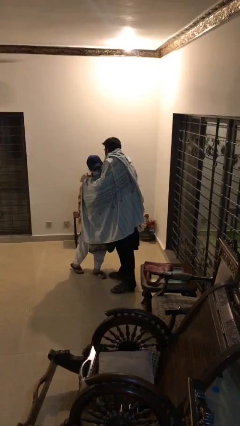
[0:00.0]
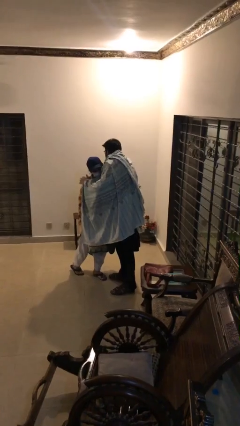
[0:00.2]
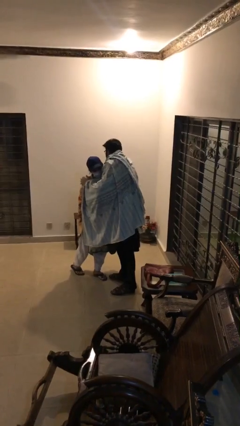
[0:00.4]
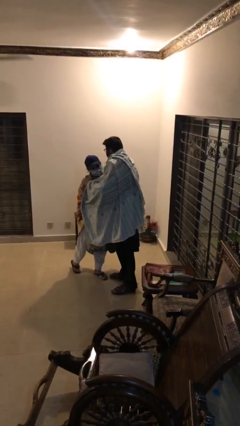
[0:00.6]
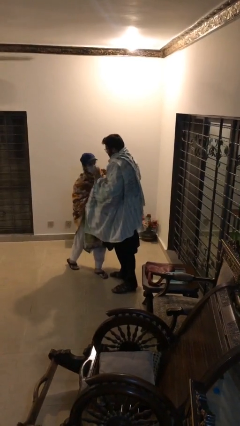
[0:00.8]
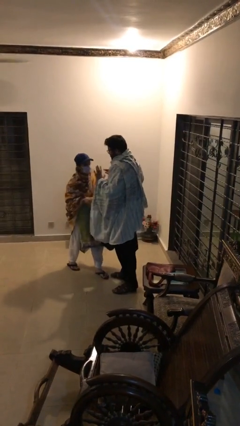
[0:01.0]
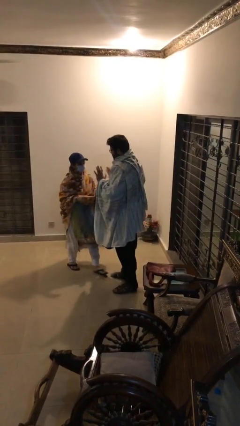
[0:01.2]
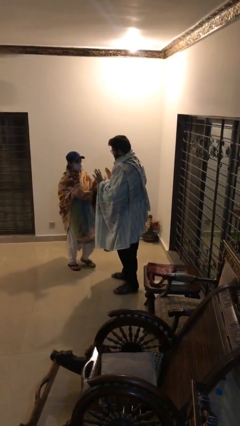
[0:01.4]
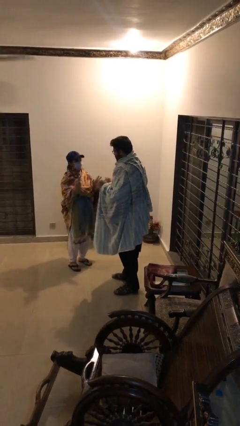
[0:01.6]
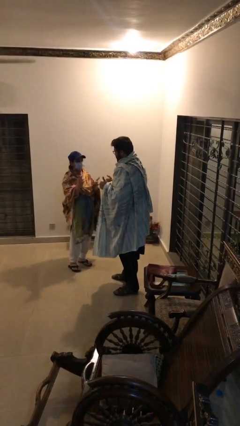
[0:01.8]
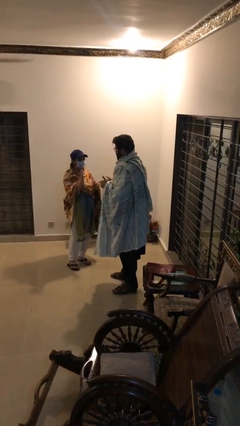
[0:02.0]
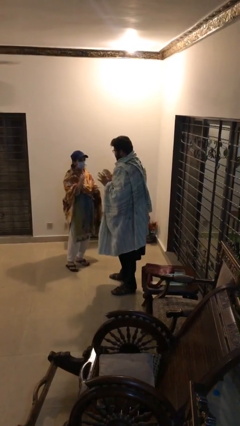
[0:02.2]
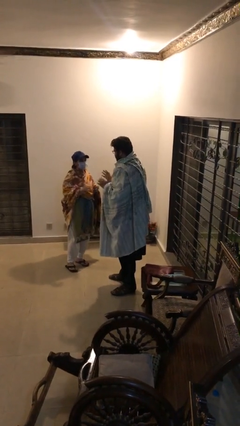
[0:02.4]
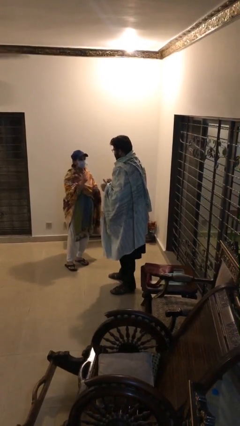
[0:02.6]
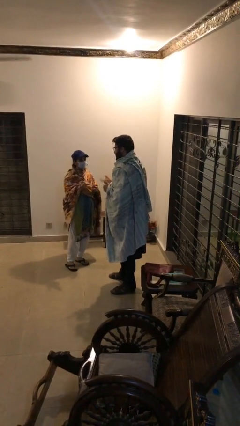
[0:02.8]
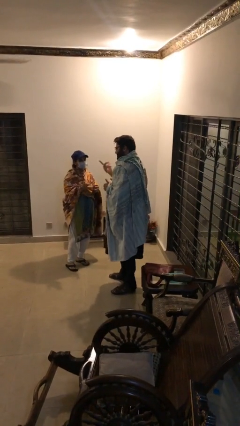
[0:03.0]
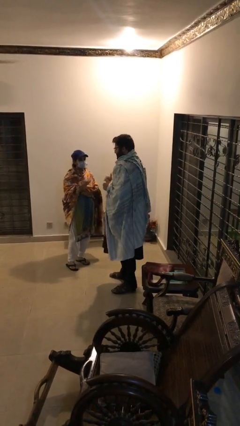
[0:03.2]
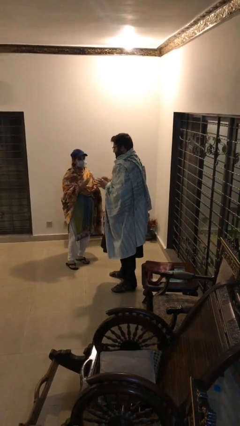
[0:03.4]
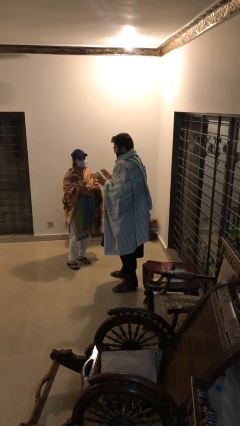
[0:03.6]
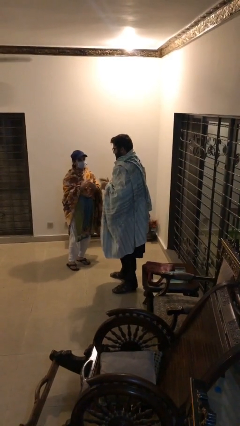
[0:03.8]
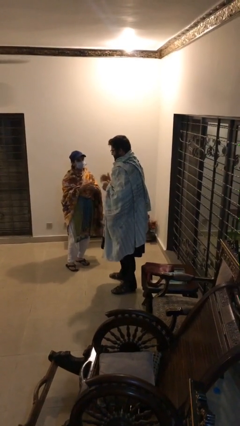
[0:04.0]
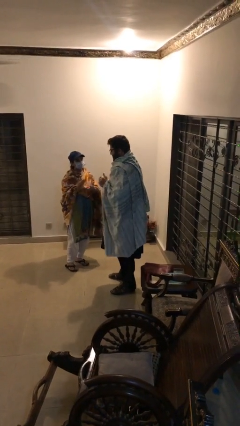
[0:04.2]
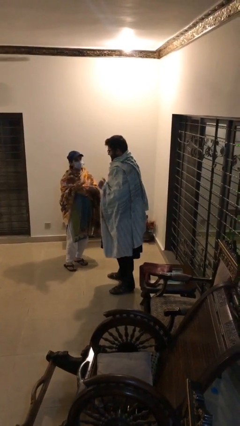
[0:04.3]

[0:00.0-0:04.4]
person talks to person

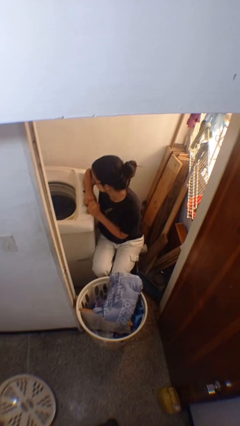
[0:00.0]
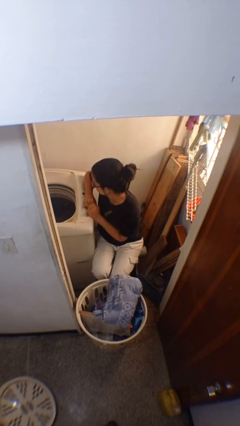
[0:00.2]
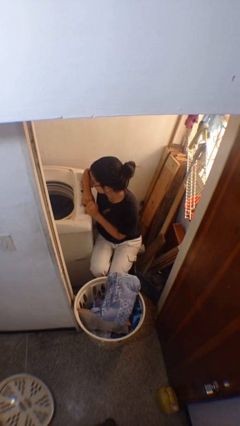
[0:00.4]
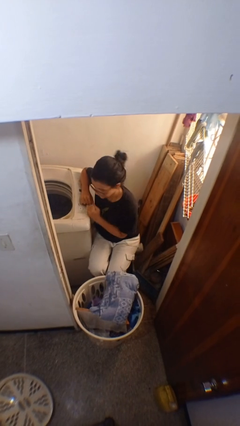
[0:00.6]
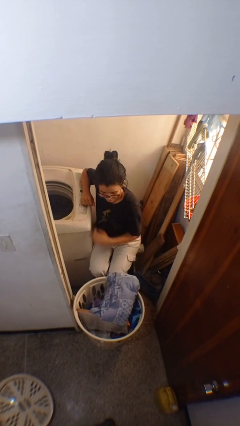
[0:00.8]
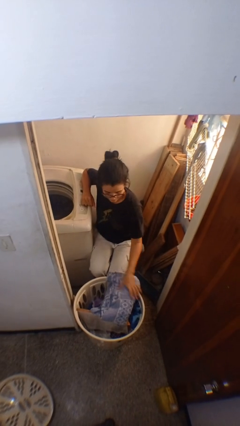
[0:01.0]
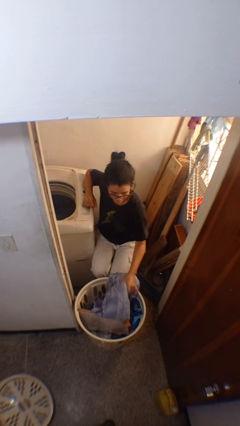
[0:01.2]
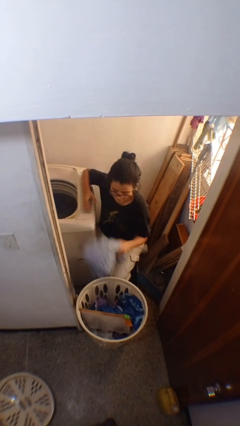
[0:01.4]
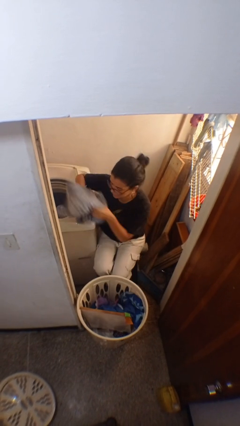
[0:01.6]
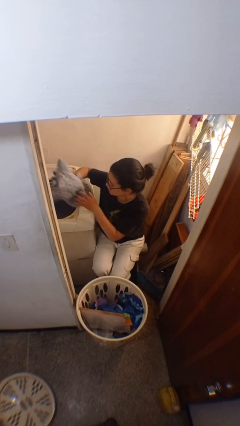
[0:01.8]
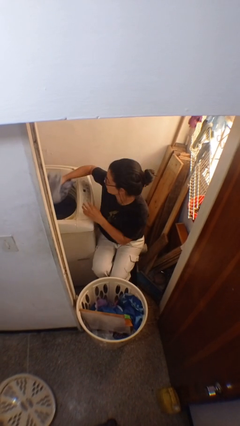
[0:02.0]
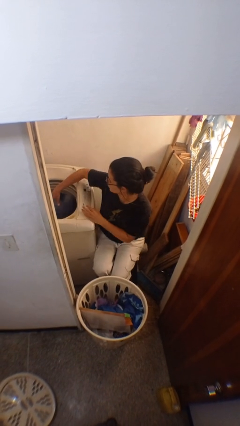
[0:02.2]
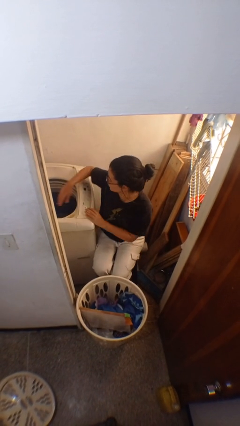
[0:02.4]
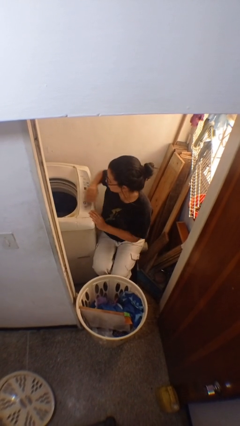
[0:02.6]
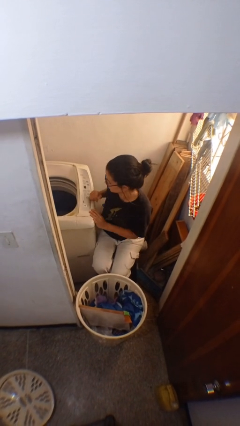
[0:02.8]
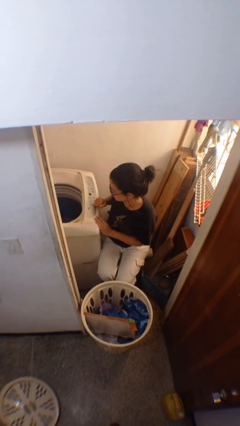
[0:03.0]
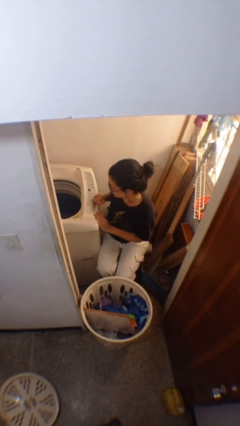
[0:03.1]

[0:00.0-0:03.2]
person loads clotheswasher

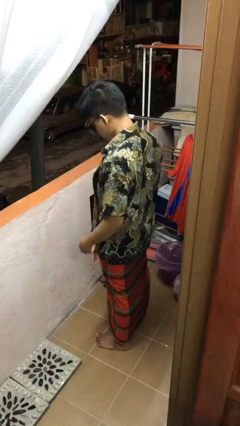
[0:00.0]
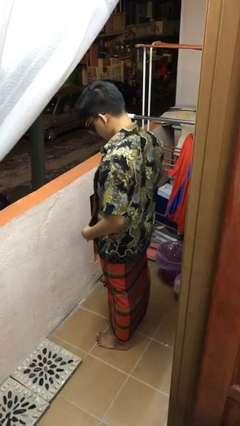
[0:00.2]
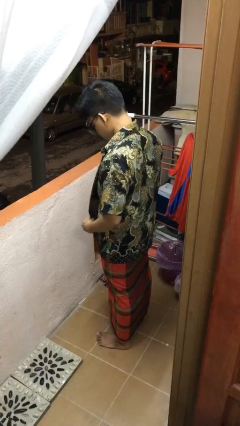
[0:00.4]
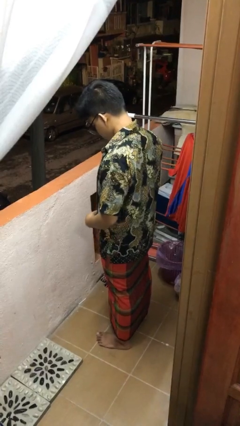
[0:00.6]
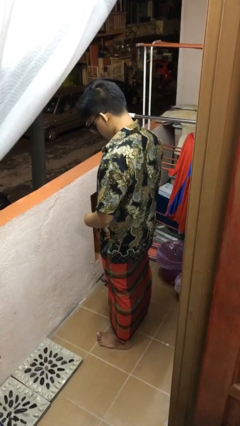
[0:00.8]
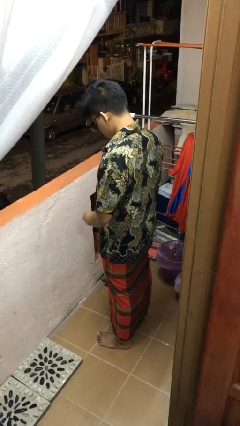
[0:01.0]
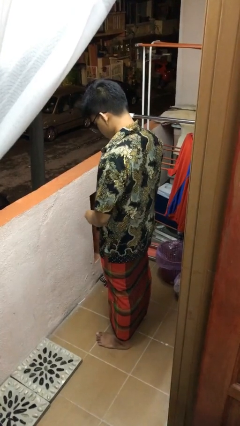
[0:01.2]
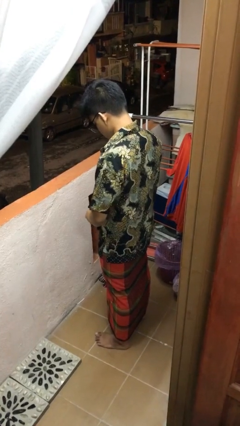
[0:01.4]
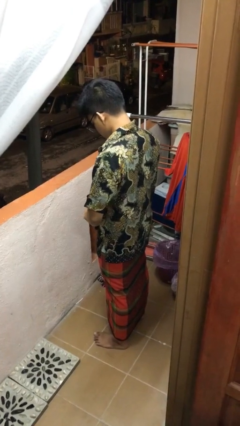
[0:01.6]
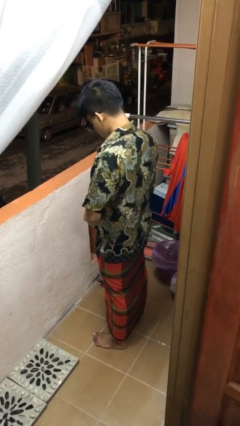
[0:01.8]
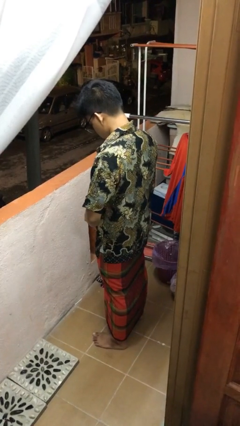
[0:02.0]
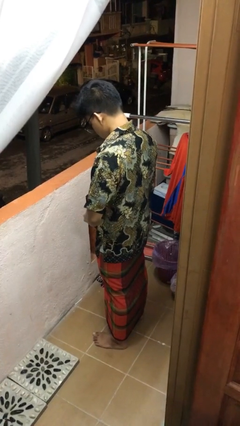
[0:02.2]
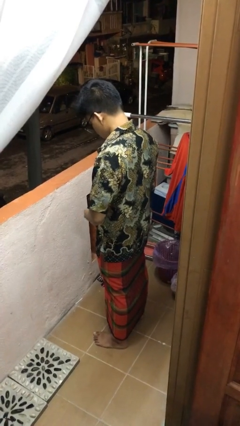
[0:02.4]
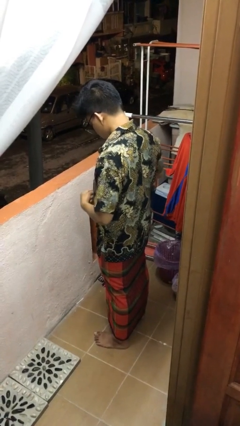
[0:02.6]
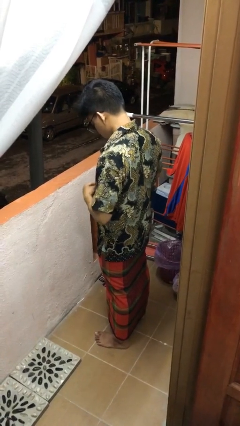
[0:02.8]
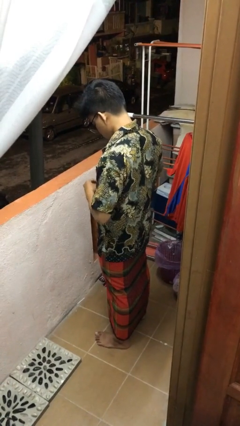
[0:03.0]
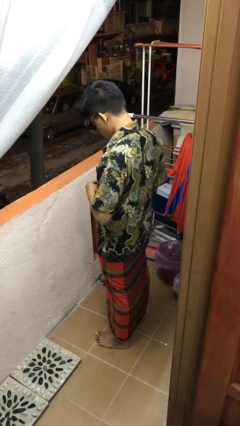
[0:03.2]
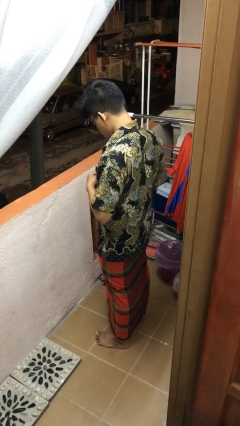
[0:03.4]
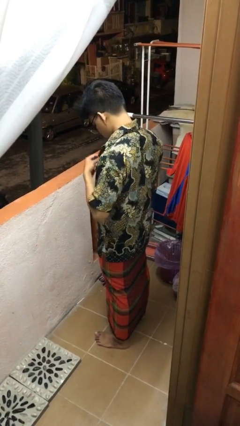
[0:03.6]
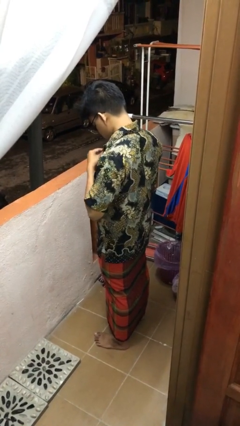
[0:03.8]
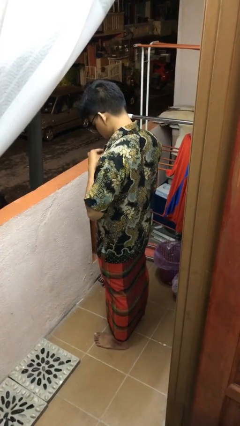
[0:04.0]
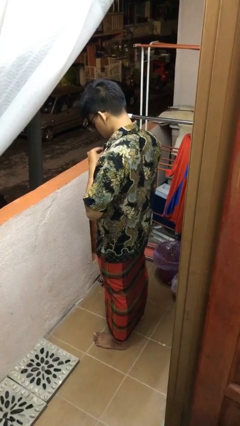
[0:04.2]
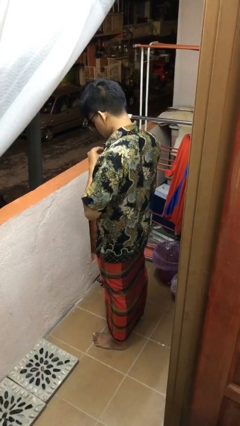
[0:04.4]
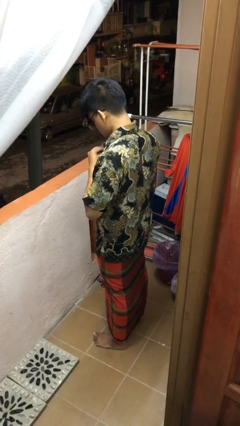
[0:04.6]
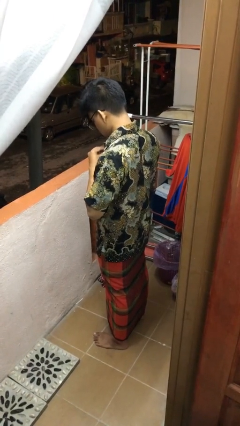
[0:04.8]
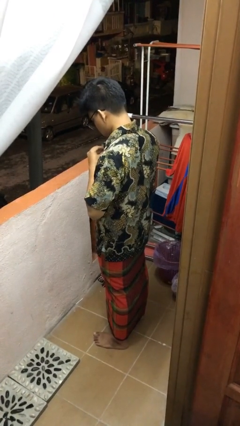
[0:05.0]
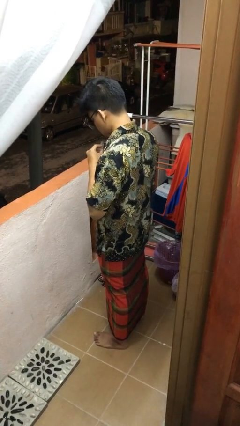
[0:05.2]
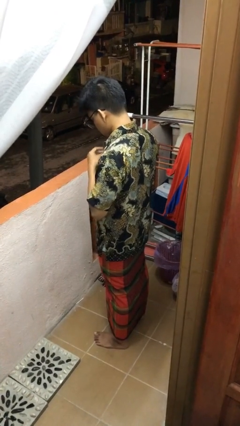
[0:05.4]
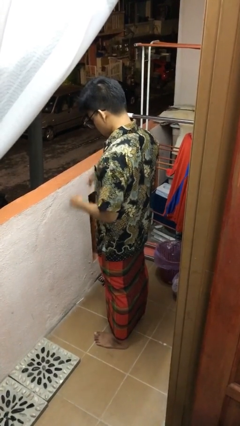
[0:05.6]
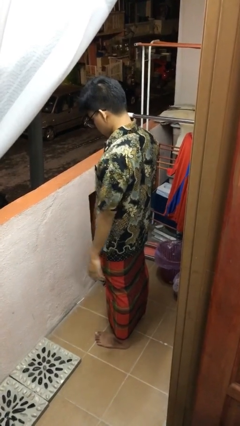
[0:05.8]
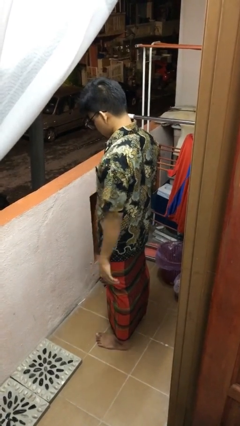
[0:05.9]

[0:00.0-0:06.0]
person buttons shirt

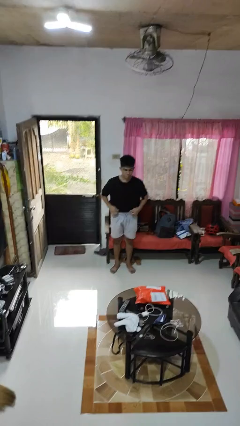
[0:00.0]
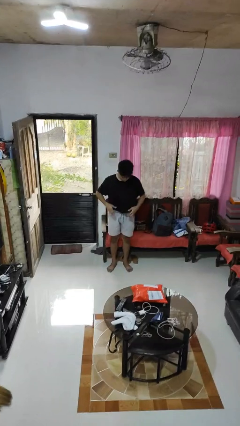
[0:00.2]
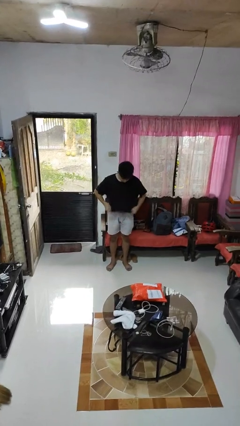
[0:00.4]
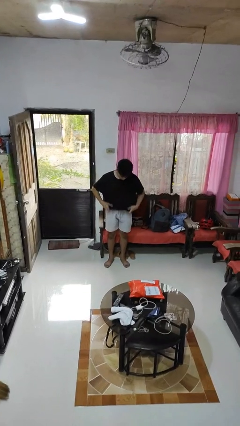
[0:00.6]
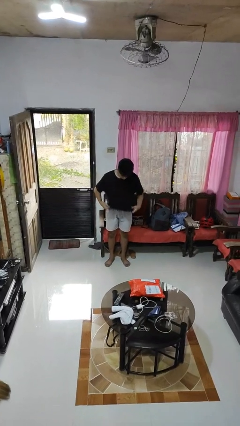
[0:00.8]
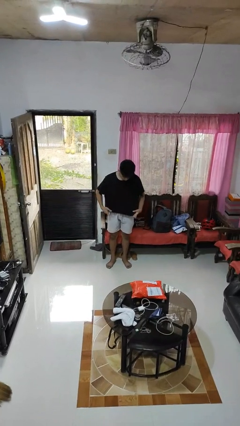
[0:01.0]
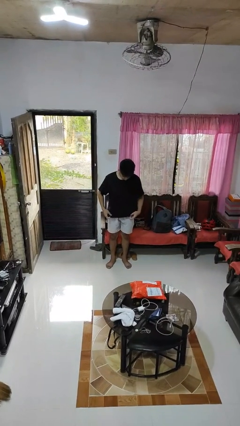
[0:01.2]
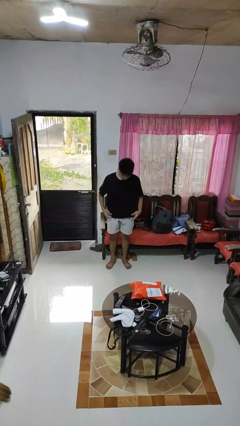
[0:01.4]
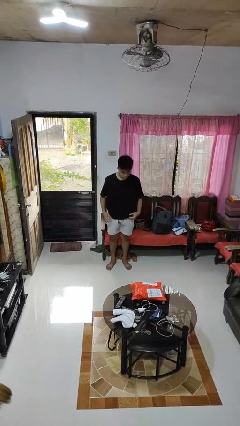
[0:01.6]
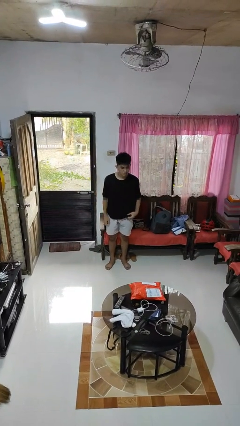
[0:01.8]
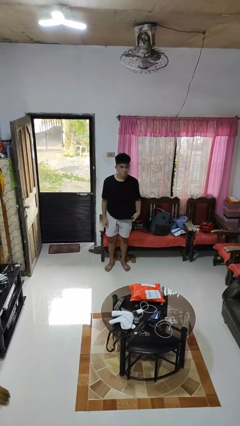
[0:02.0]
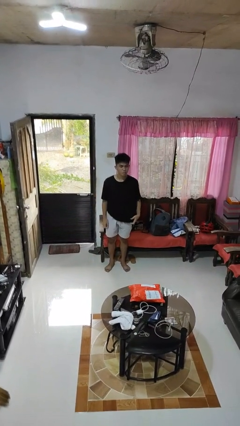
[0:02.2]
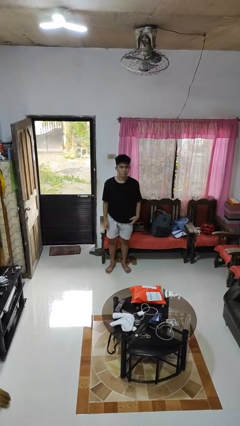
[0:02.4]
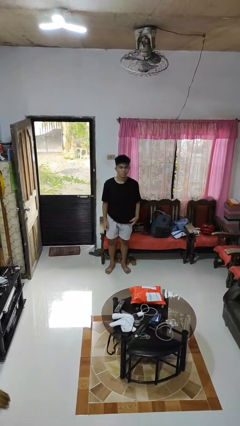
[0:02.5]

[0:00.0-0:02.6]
person untucks shirt

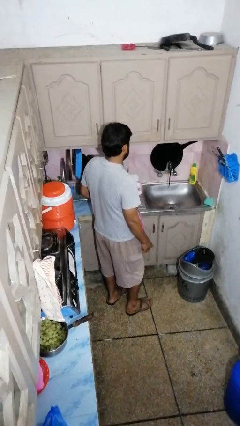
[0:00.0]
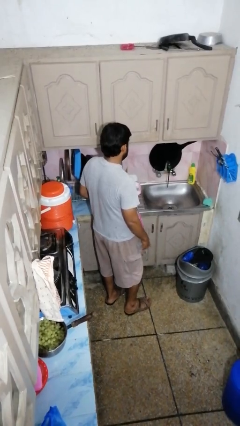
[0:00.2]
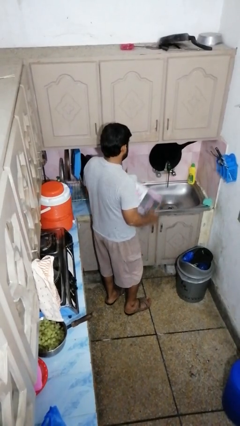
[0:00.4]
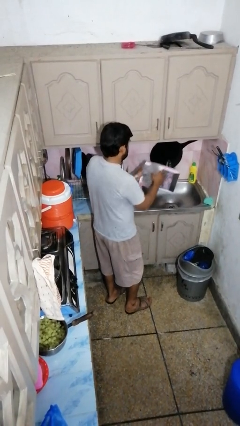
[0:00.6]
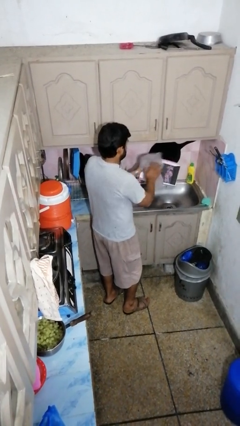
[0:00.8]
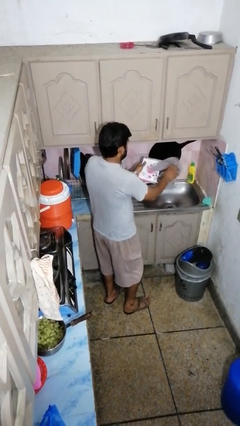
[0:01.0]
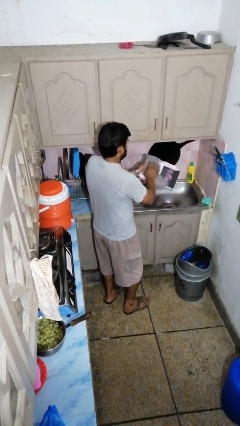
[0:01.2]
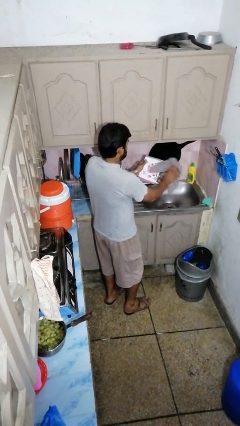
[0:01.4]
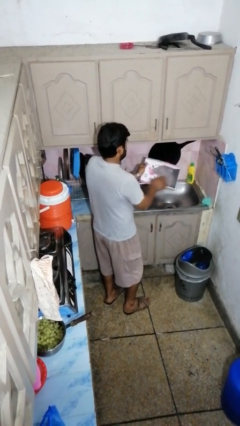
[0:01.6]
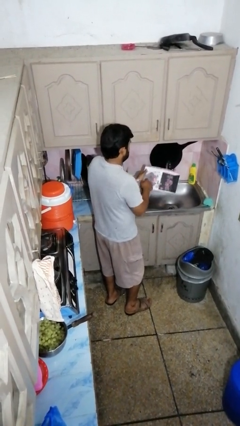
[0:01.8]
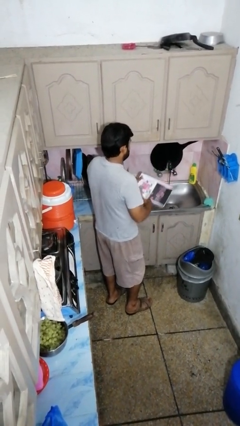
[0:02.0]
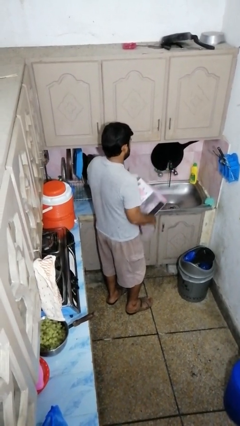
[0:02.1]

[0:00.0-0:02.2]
person dries dish
